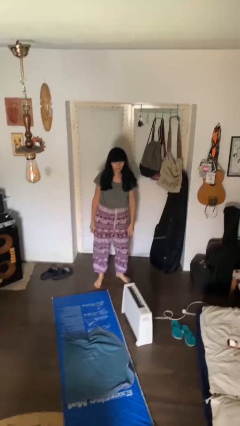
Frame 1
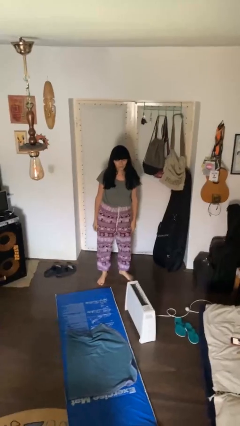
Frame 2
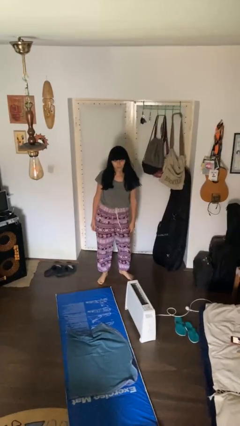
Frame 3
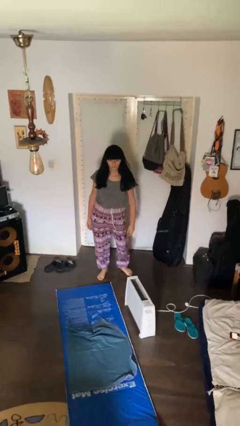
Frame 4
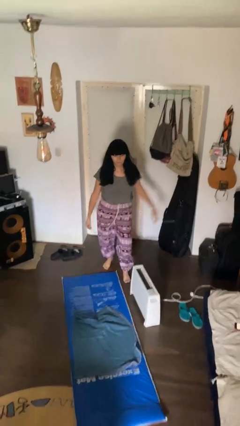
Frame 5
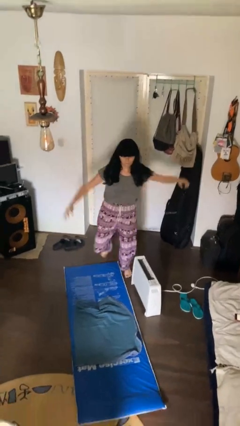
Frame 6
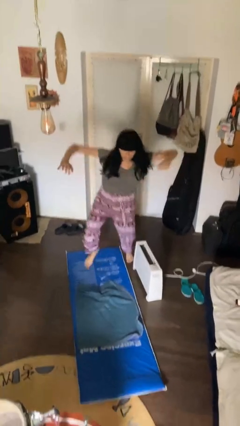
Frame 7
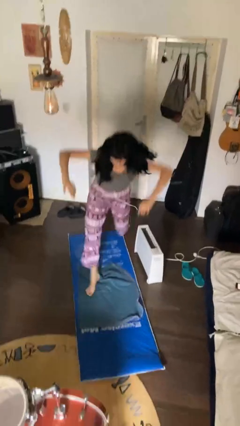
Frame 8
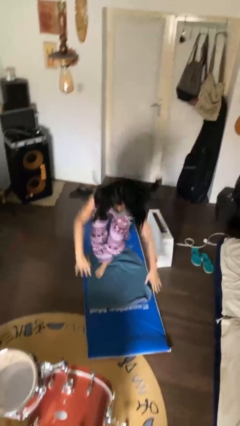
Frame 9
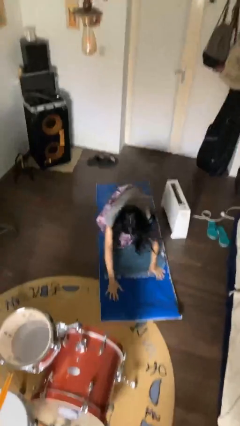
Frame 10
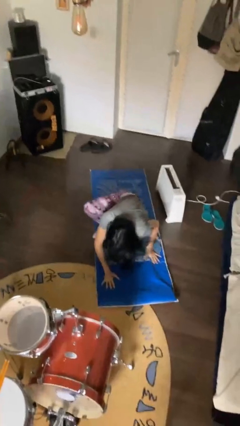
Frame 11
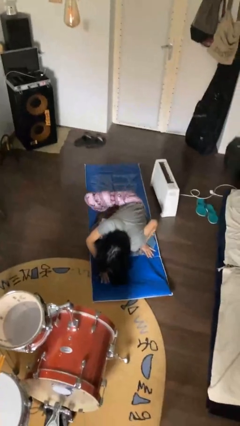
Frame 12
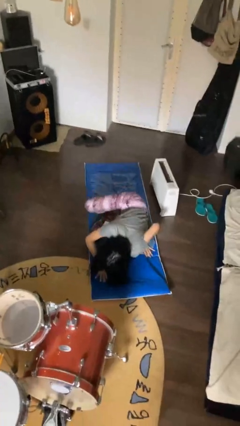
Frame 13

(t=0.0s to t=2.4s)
person trips on object on floor

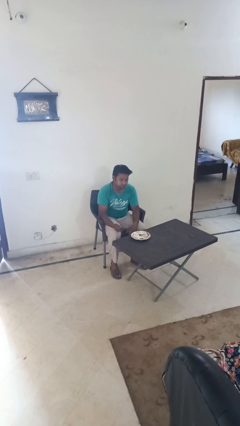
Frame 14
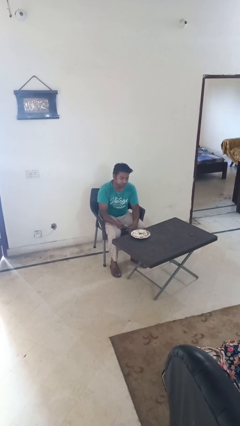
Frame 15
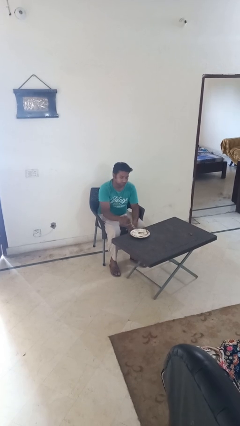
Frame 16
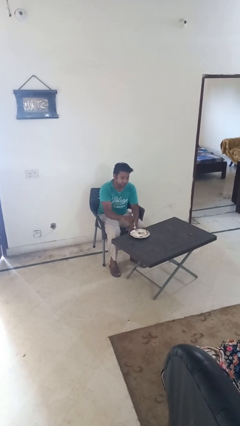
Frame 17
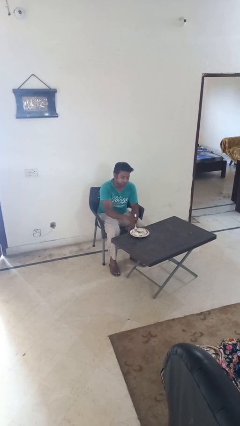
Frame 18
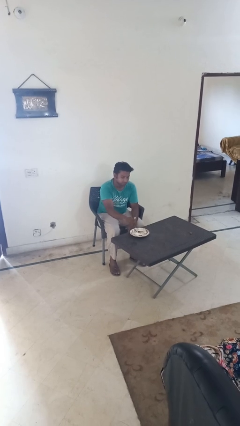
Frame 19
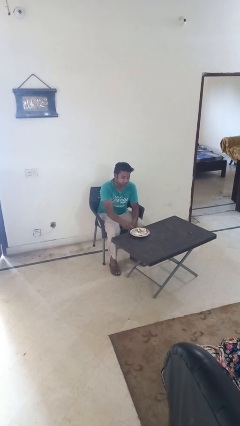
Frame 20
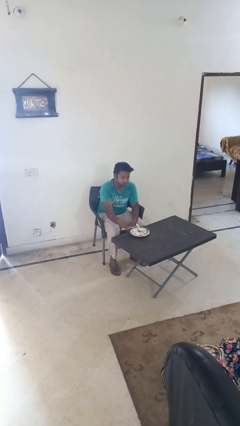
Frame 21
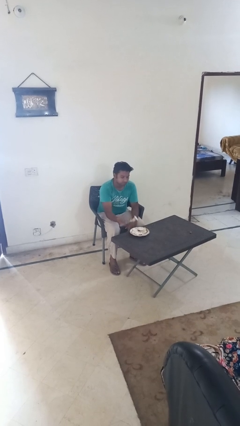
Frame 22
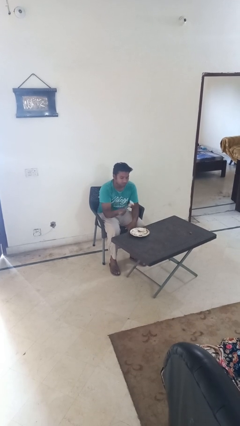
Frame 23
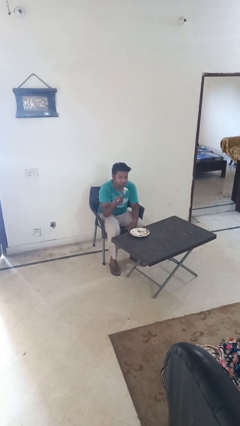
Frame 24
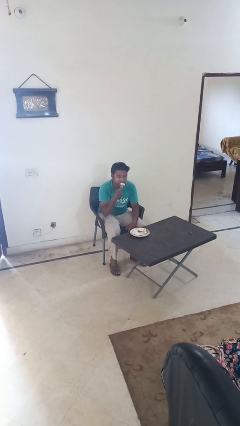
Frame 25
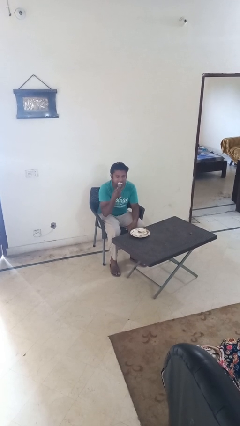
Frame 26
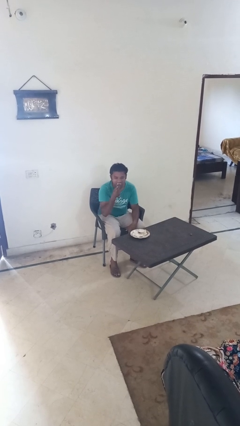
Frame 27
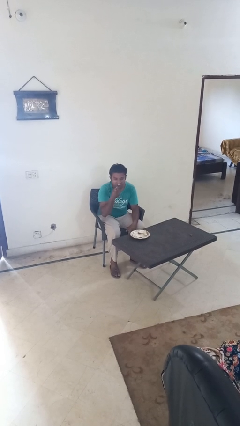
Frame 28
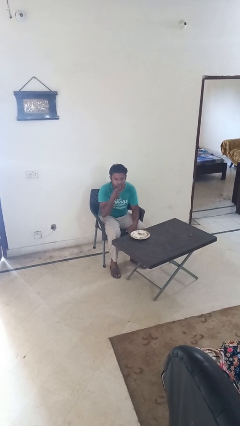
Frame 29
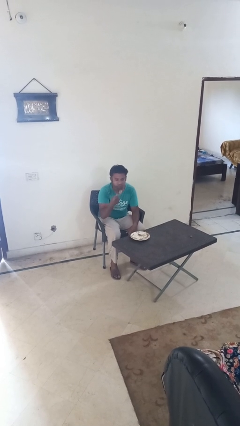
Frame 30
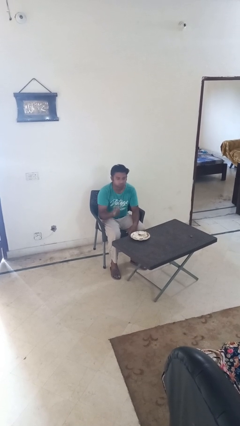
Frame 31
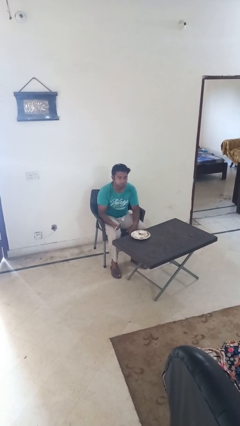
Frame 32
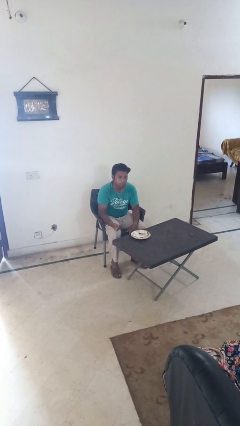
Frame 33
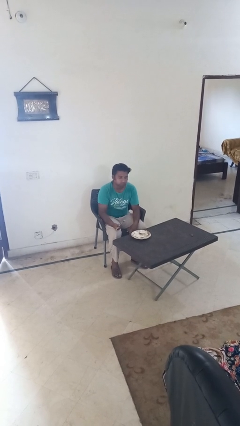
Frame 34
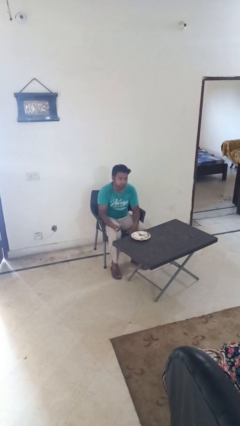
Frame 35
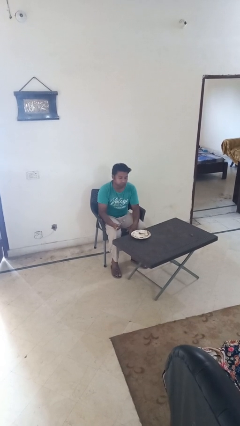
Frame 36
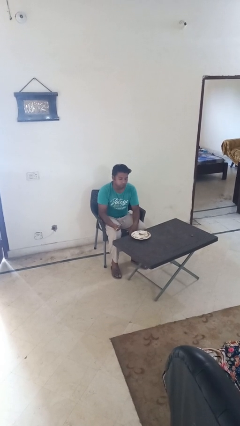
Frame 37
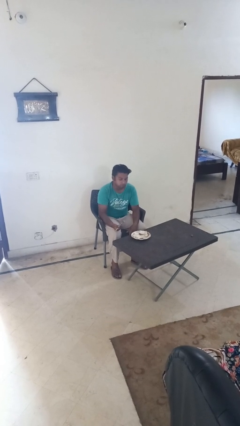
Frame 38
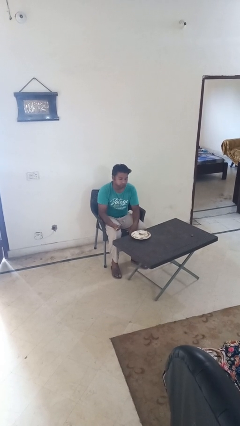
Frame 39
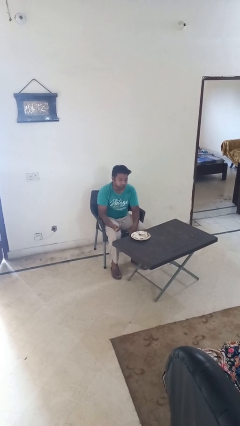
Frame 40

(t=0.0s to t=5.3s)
person eats with utensil

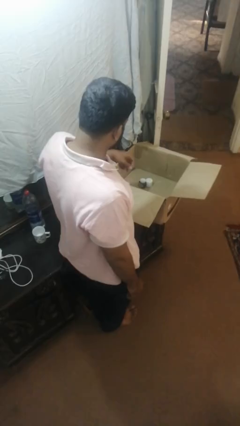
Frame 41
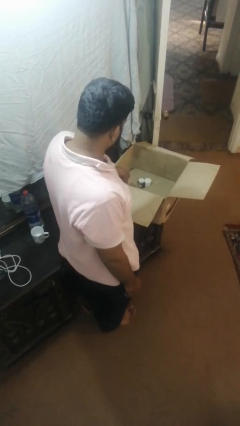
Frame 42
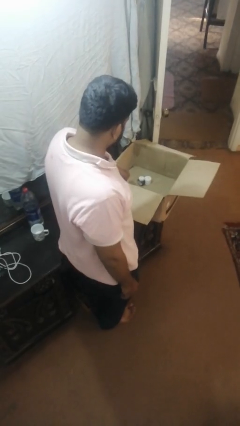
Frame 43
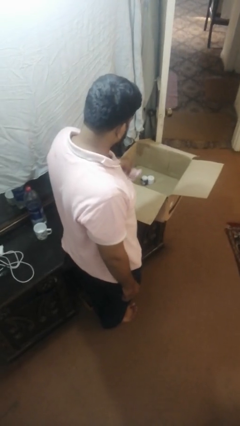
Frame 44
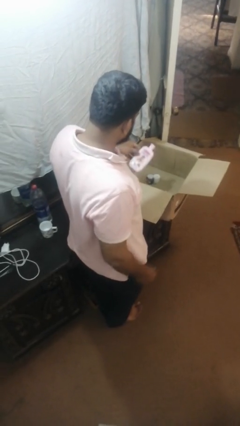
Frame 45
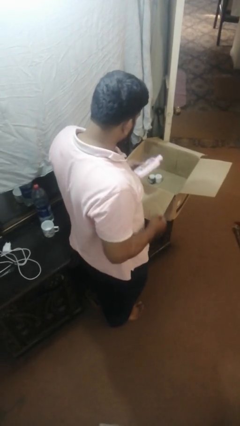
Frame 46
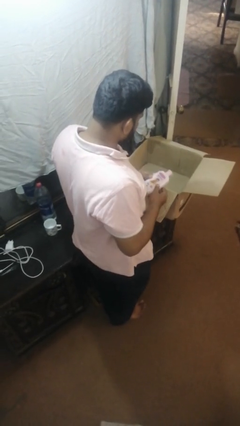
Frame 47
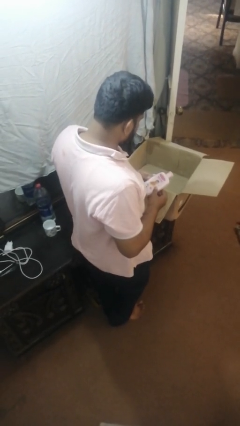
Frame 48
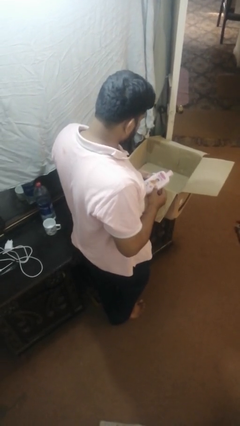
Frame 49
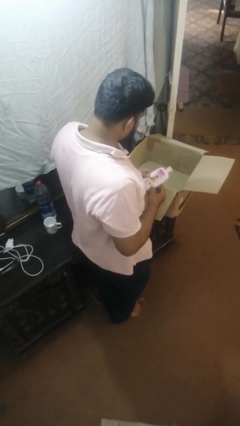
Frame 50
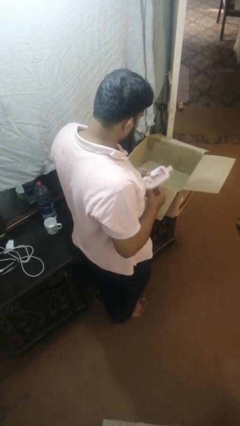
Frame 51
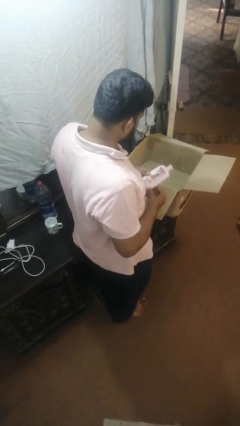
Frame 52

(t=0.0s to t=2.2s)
person takes object from box

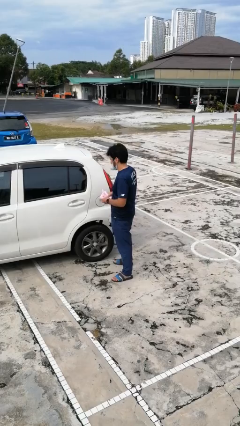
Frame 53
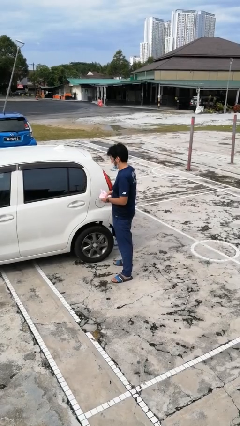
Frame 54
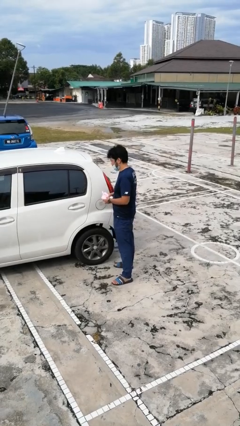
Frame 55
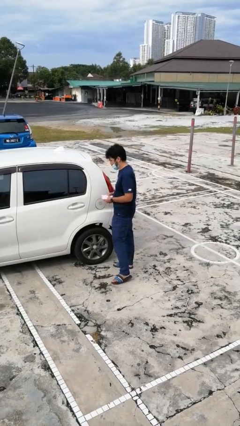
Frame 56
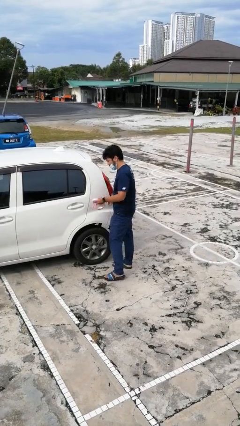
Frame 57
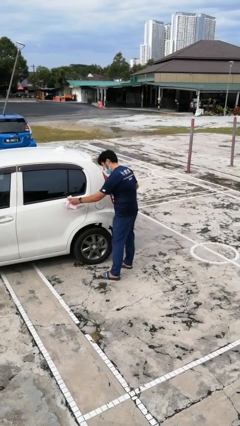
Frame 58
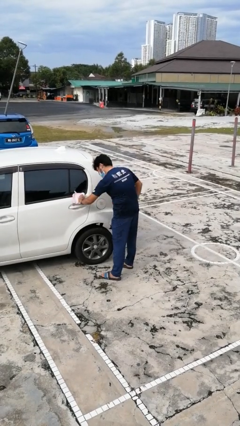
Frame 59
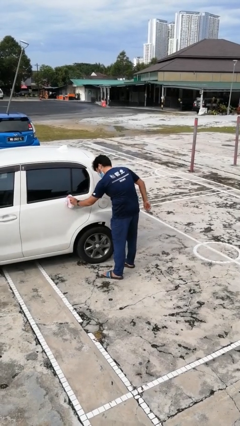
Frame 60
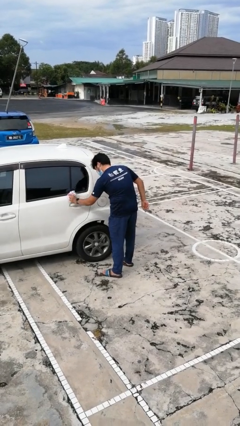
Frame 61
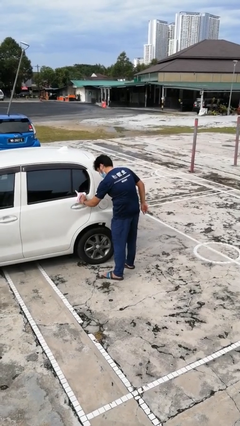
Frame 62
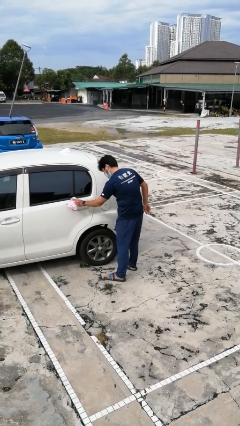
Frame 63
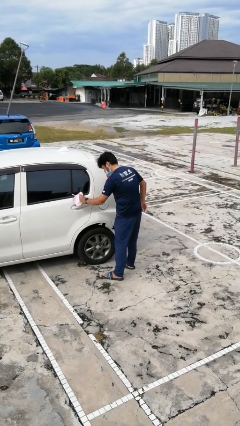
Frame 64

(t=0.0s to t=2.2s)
person polishes car with rag

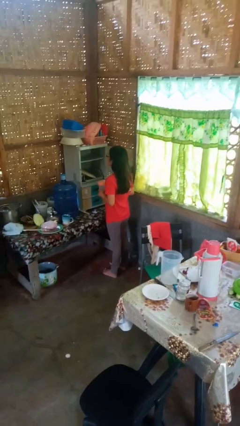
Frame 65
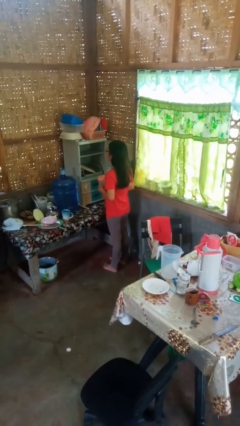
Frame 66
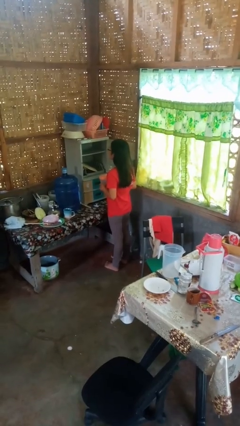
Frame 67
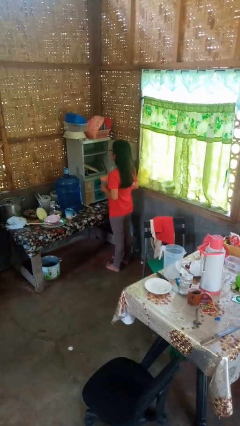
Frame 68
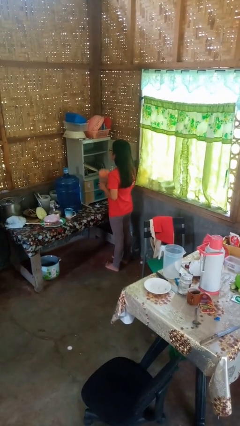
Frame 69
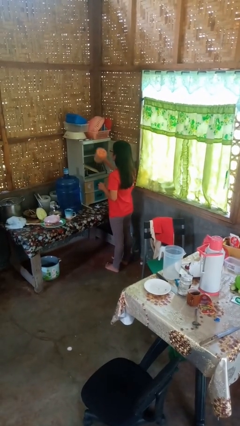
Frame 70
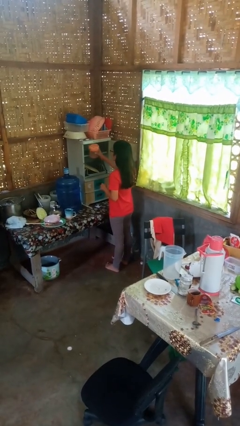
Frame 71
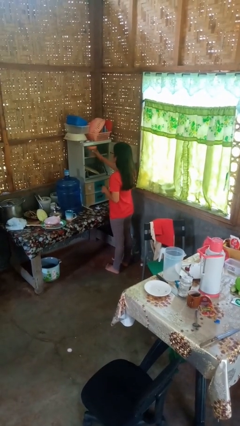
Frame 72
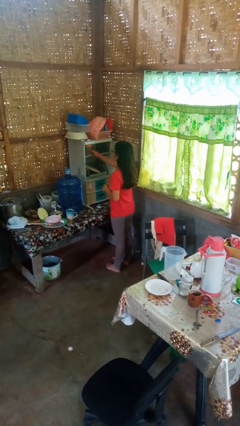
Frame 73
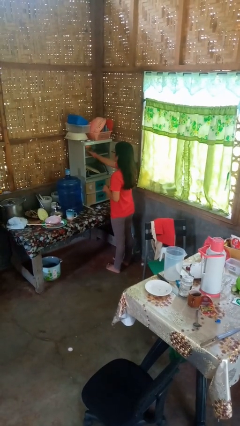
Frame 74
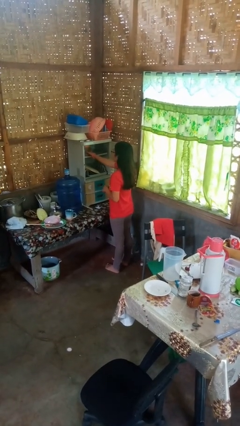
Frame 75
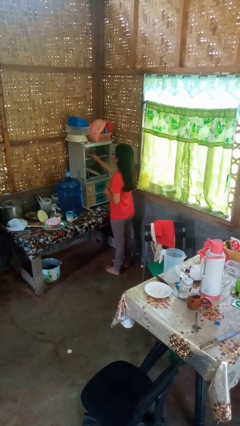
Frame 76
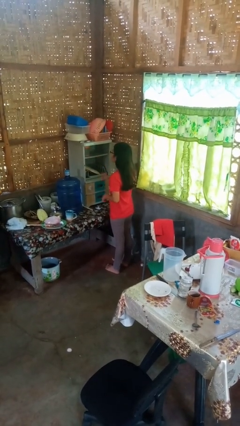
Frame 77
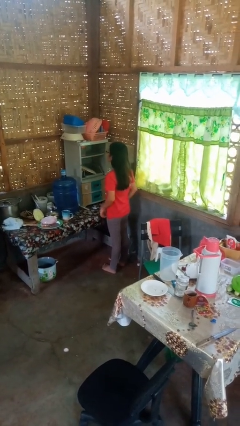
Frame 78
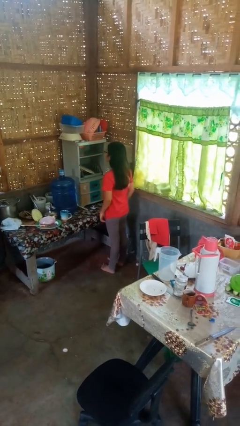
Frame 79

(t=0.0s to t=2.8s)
person puts down object into cabinet

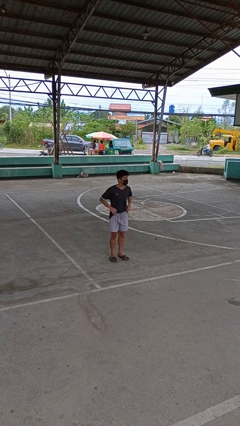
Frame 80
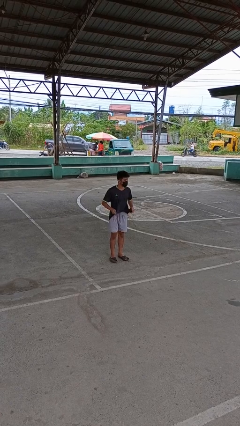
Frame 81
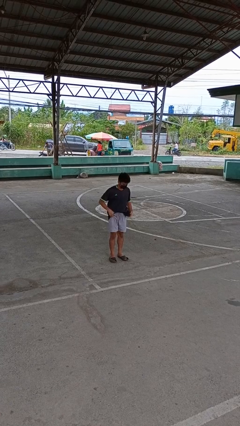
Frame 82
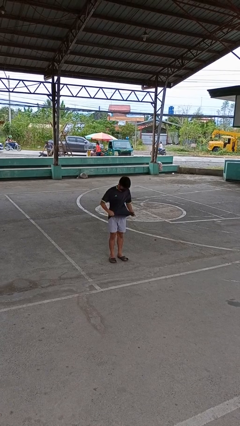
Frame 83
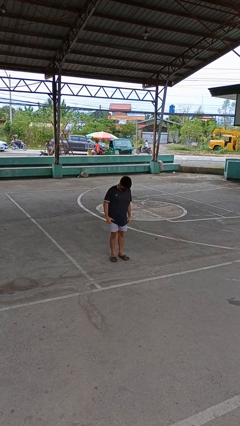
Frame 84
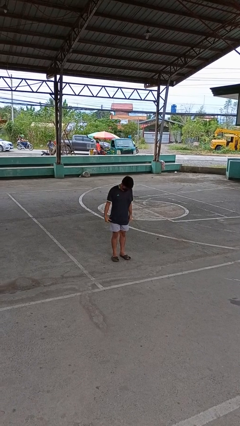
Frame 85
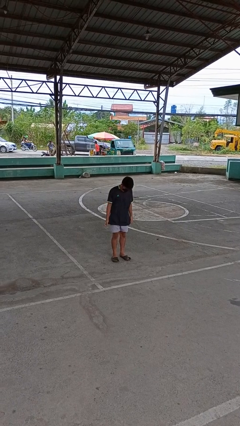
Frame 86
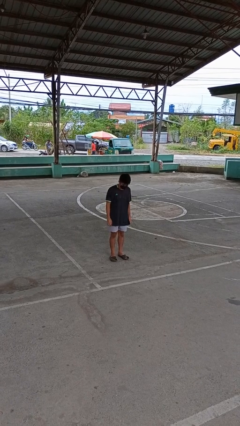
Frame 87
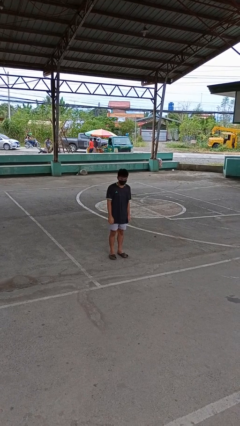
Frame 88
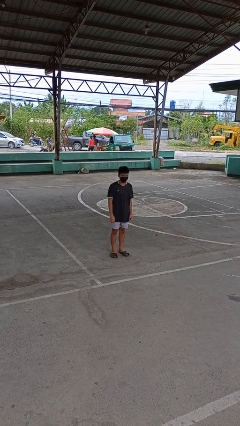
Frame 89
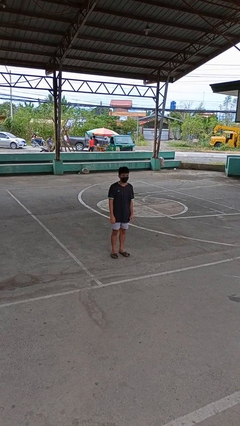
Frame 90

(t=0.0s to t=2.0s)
person untucks shirt

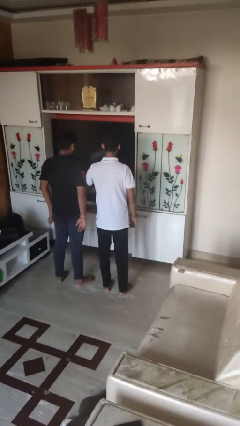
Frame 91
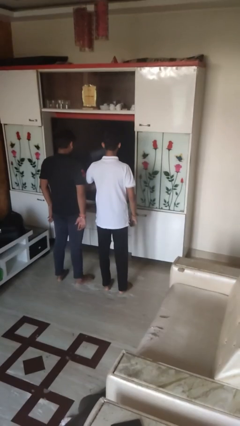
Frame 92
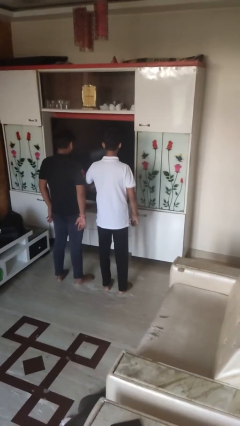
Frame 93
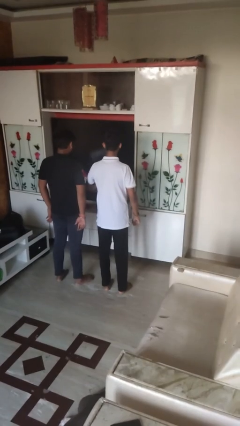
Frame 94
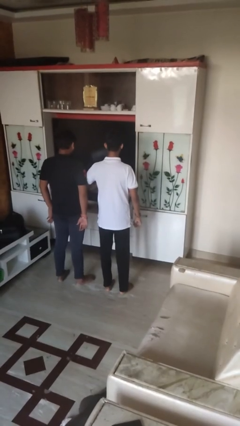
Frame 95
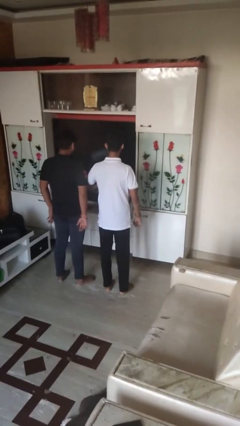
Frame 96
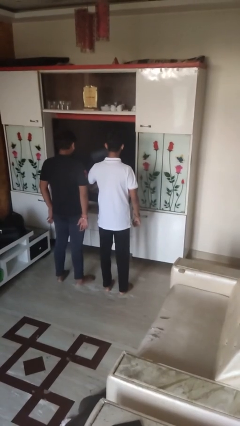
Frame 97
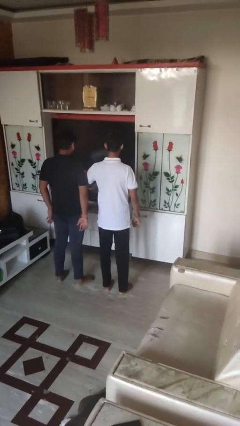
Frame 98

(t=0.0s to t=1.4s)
person nudges person with elbow
